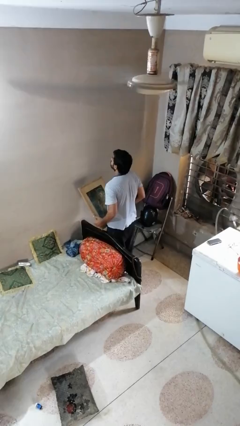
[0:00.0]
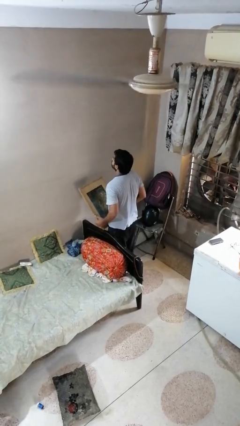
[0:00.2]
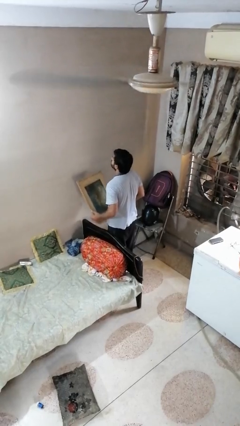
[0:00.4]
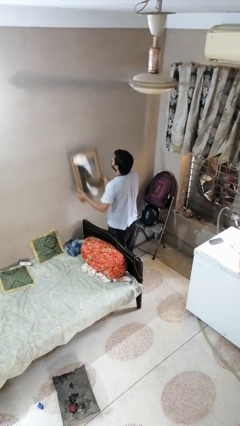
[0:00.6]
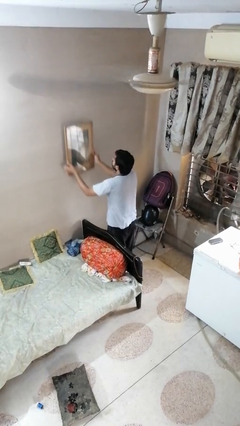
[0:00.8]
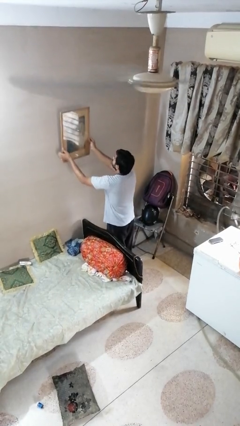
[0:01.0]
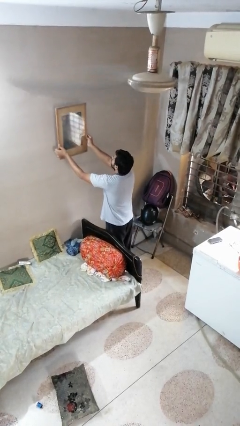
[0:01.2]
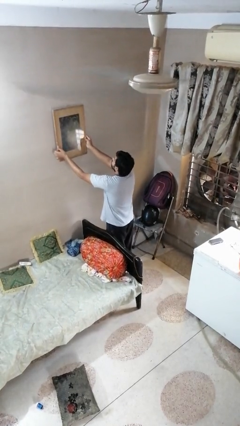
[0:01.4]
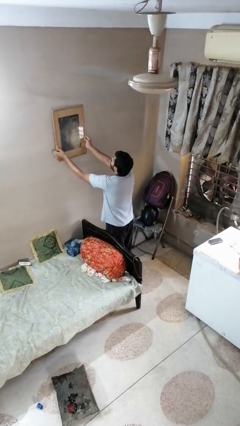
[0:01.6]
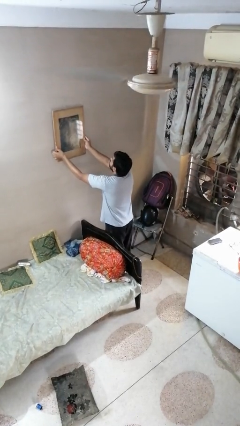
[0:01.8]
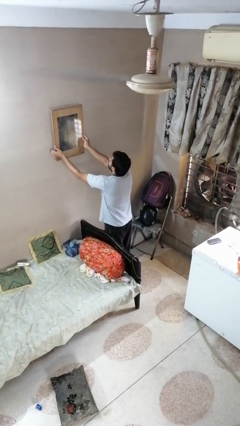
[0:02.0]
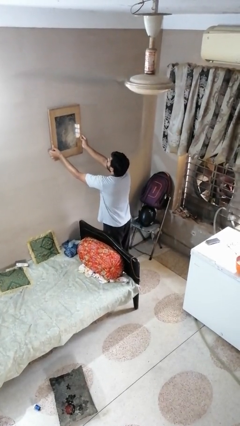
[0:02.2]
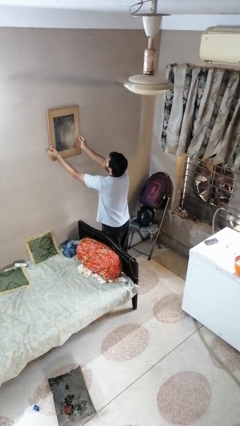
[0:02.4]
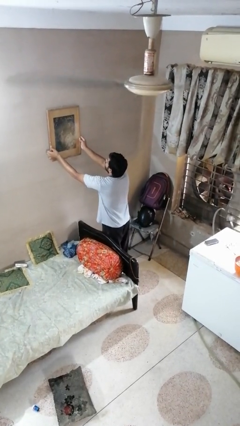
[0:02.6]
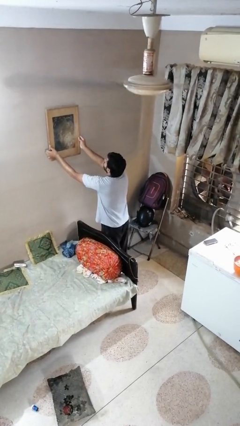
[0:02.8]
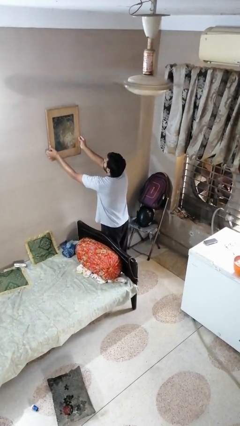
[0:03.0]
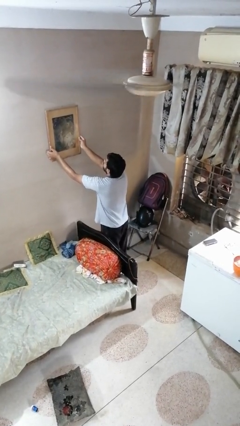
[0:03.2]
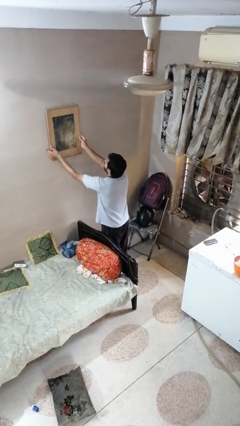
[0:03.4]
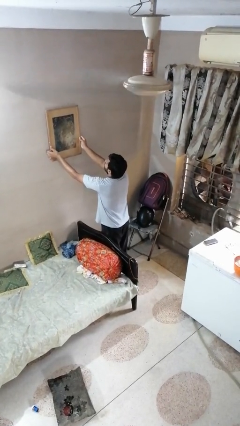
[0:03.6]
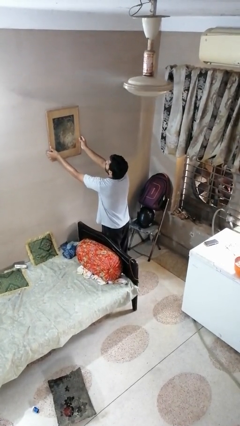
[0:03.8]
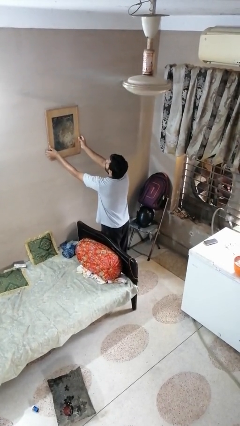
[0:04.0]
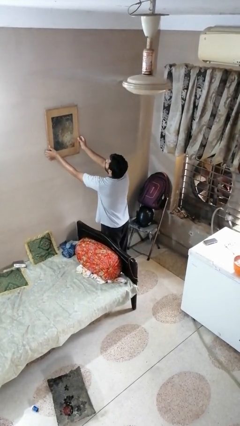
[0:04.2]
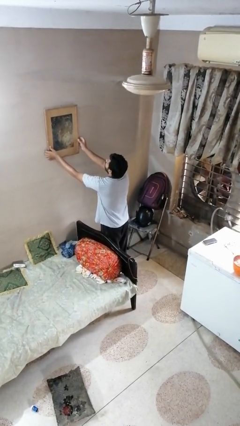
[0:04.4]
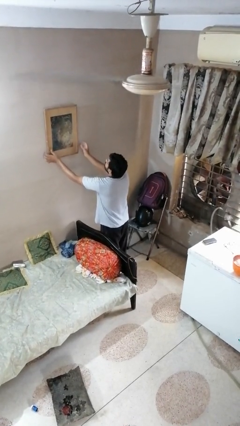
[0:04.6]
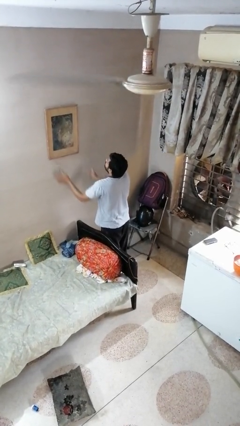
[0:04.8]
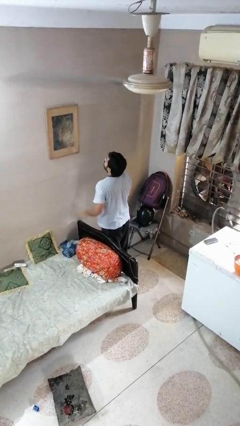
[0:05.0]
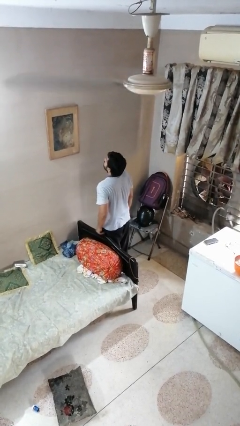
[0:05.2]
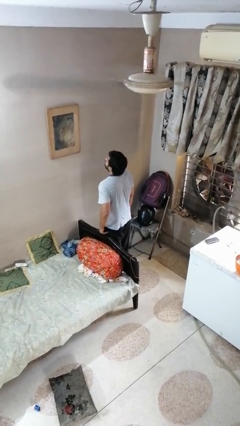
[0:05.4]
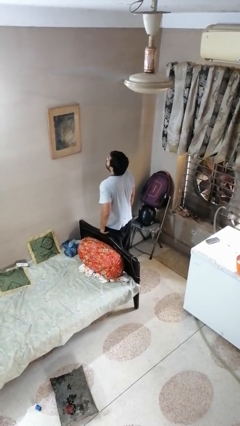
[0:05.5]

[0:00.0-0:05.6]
person puts up picture frame

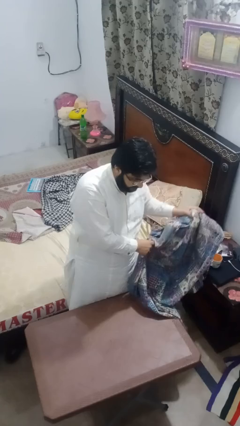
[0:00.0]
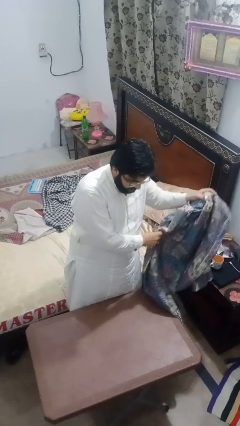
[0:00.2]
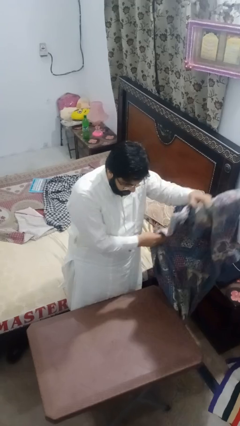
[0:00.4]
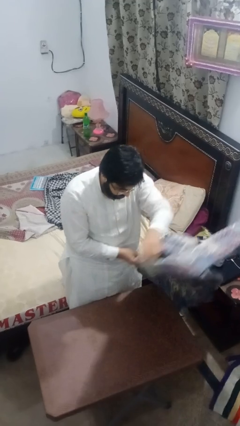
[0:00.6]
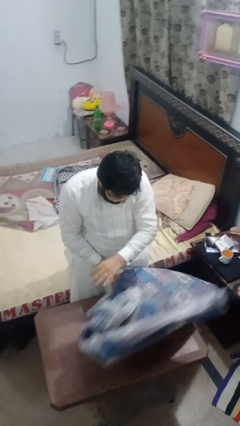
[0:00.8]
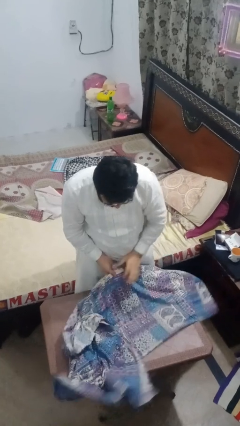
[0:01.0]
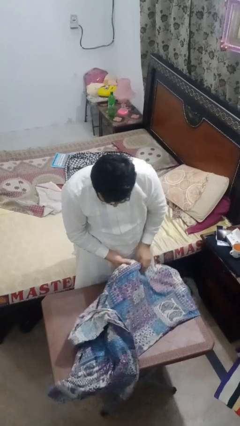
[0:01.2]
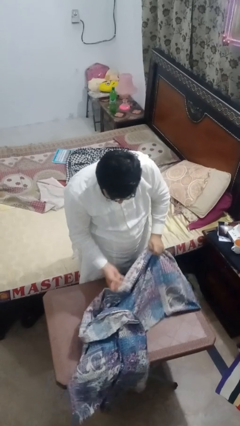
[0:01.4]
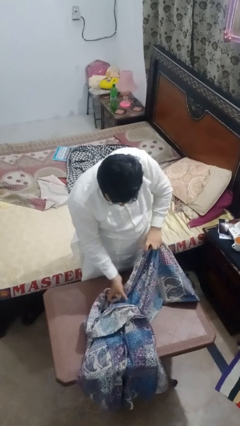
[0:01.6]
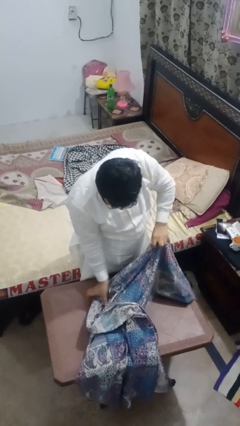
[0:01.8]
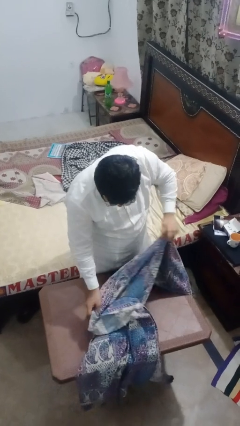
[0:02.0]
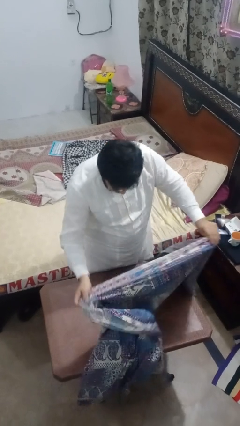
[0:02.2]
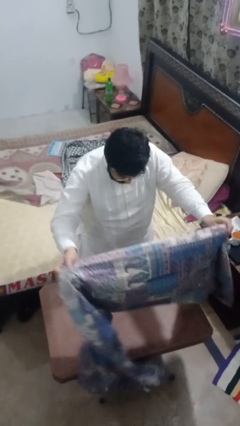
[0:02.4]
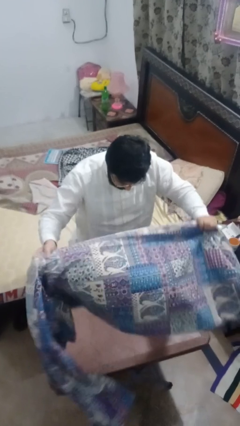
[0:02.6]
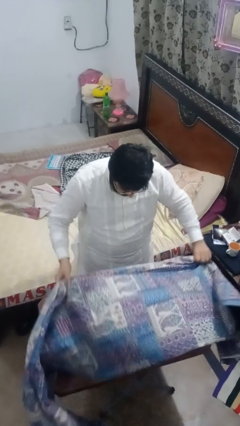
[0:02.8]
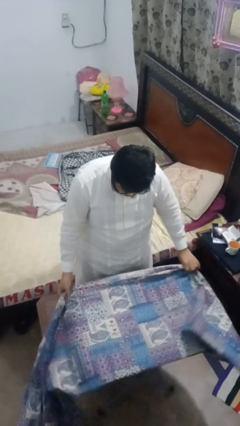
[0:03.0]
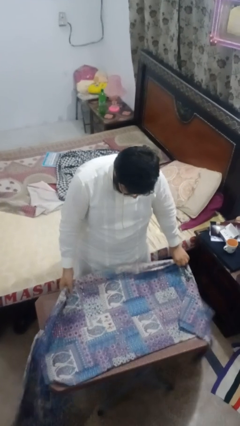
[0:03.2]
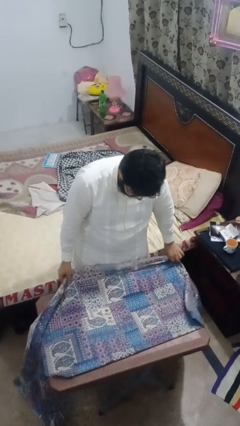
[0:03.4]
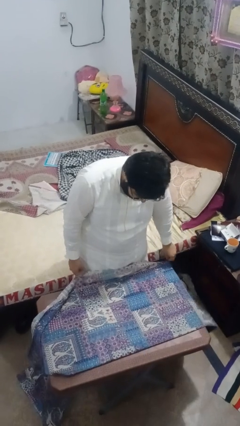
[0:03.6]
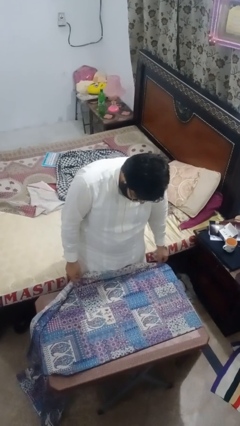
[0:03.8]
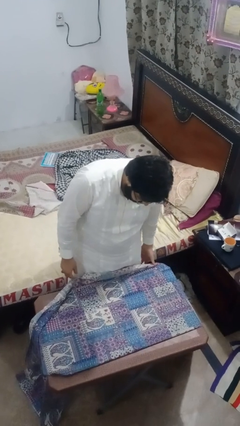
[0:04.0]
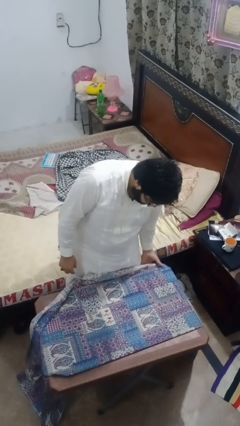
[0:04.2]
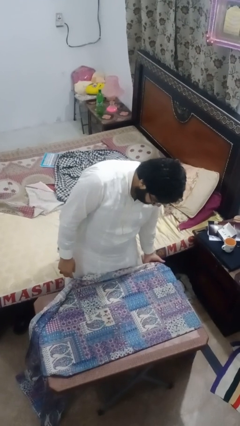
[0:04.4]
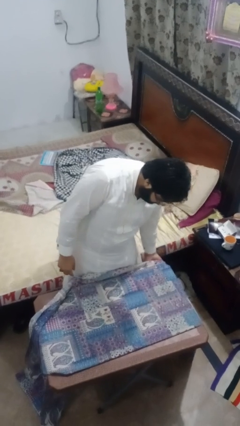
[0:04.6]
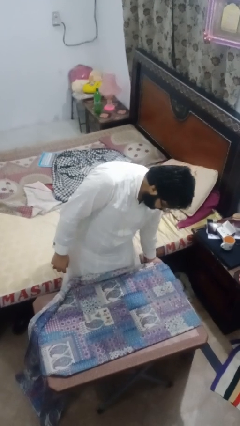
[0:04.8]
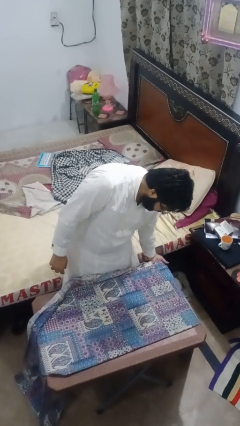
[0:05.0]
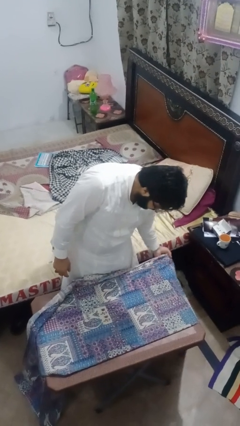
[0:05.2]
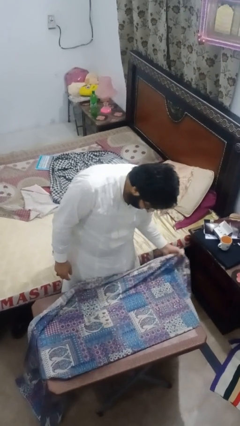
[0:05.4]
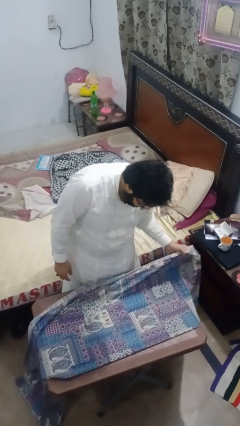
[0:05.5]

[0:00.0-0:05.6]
person spreads tablecloth

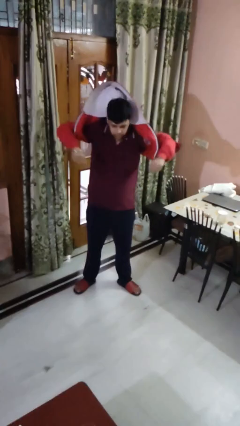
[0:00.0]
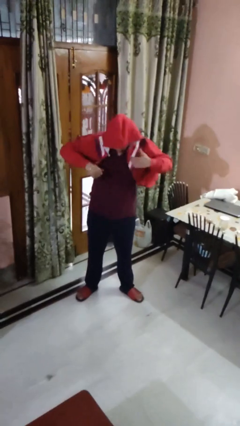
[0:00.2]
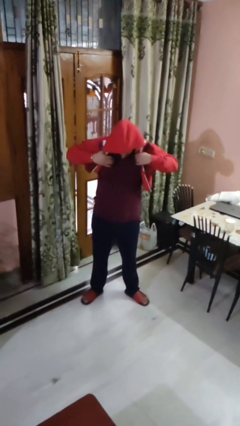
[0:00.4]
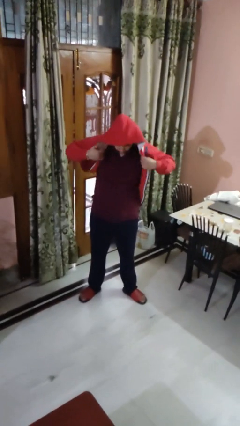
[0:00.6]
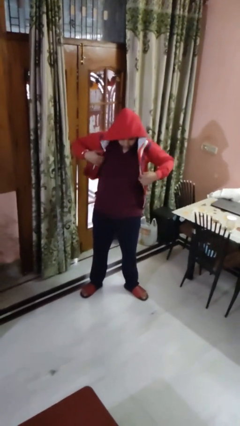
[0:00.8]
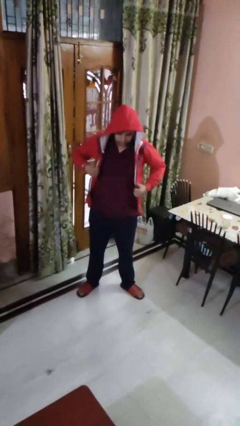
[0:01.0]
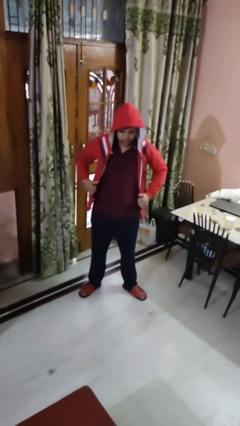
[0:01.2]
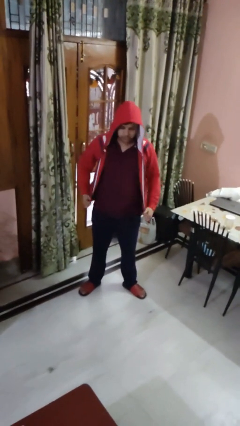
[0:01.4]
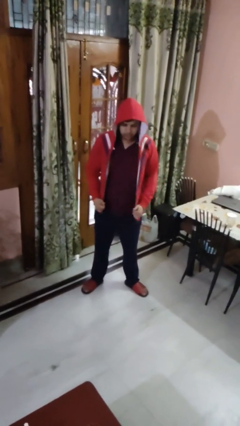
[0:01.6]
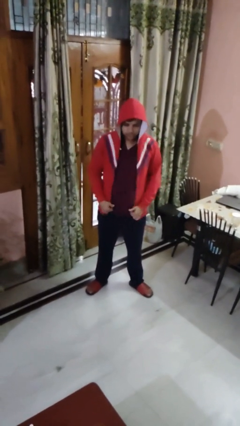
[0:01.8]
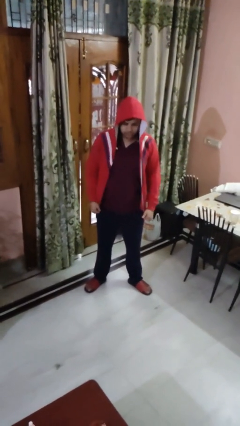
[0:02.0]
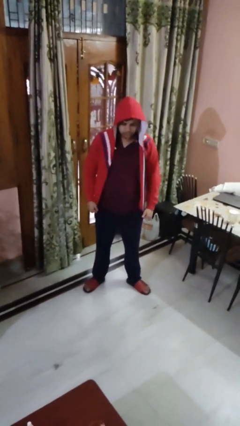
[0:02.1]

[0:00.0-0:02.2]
person puts on hoodie

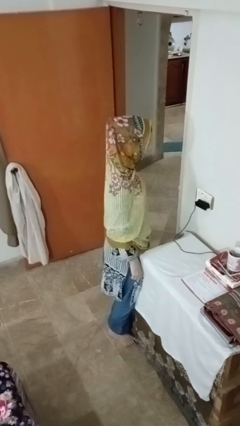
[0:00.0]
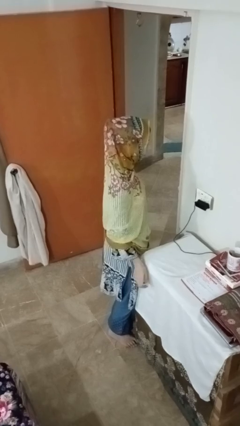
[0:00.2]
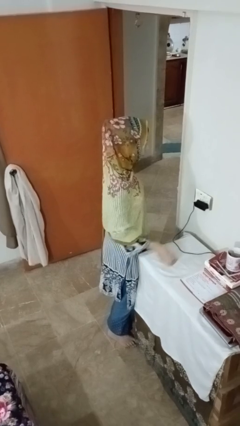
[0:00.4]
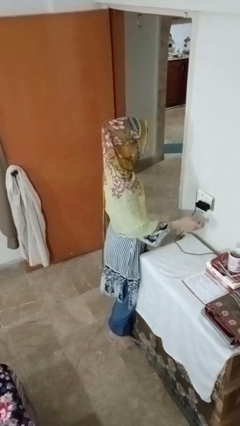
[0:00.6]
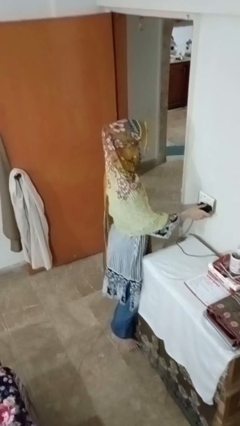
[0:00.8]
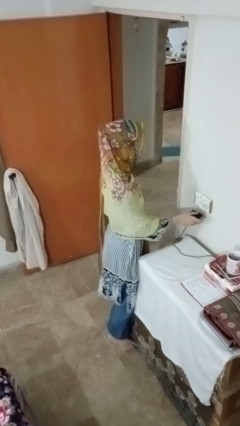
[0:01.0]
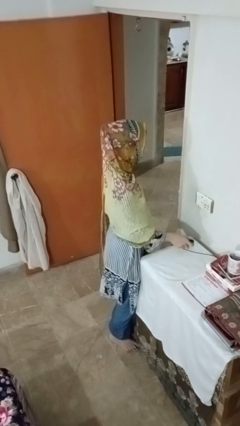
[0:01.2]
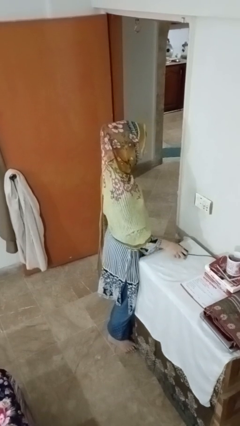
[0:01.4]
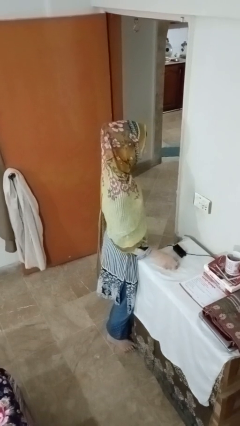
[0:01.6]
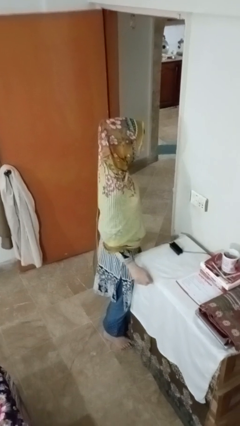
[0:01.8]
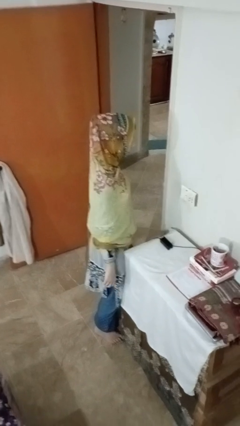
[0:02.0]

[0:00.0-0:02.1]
person unplugs from electrical socket

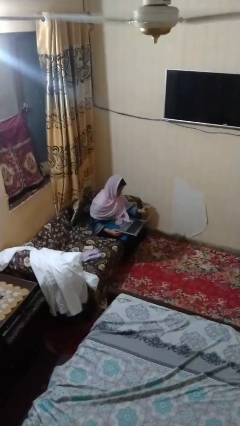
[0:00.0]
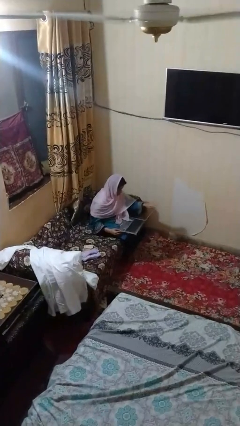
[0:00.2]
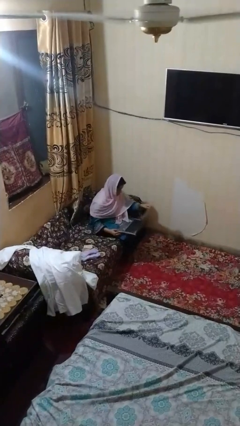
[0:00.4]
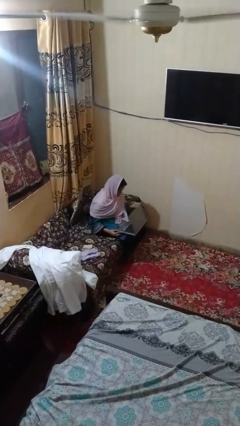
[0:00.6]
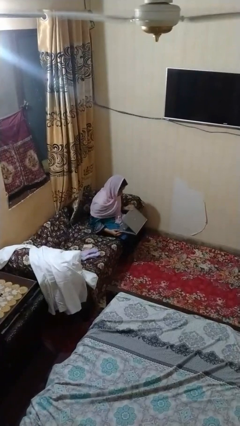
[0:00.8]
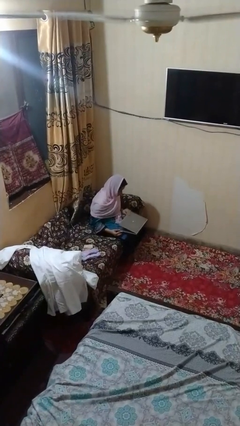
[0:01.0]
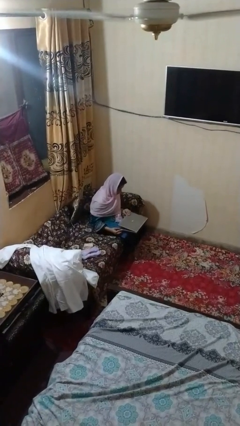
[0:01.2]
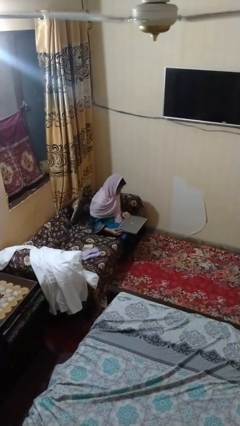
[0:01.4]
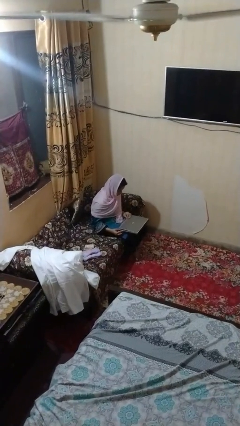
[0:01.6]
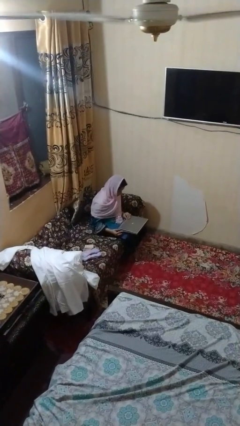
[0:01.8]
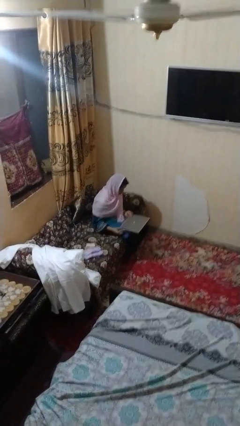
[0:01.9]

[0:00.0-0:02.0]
person closes laptop

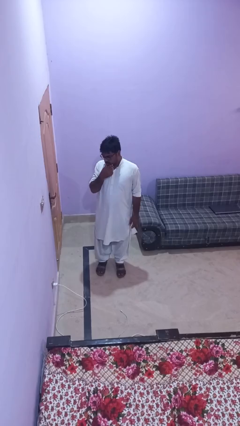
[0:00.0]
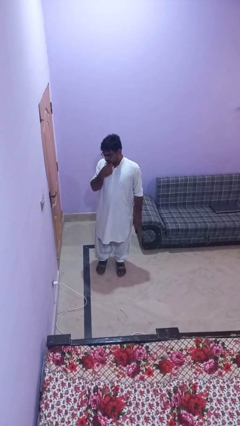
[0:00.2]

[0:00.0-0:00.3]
person closes door with hip
